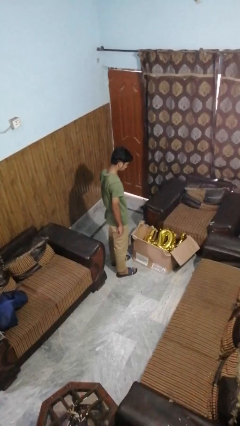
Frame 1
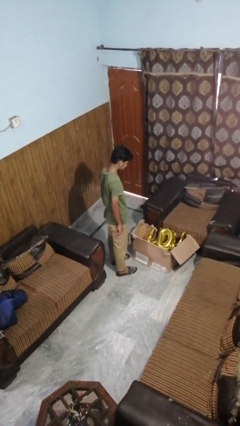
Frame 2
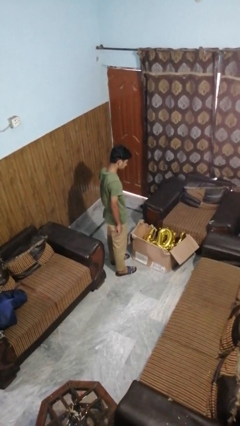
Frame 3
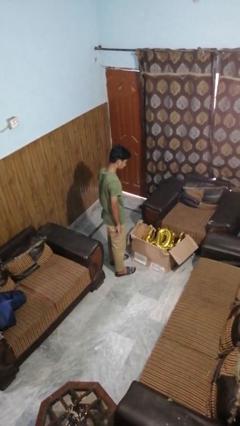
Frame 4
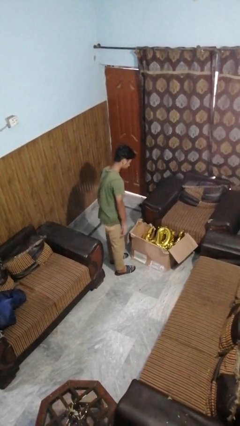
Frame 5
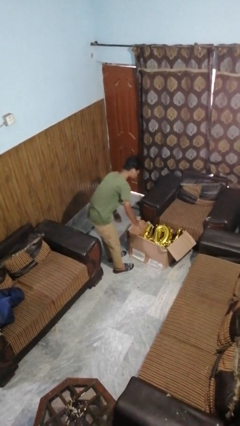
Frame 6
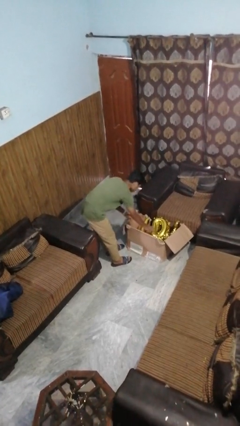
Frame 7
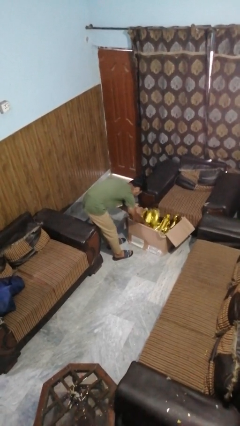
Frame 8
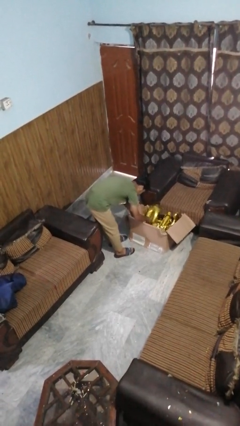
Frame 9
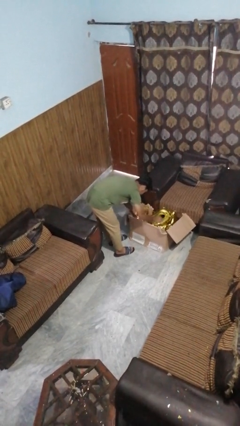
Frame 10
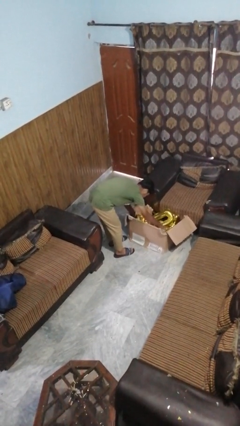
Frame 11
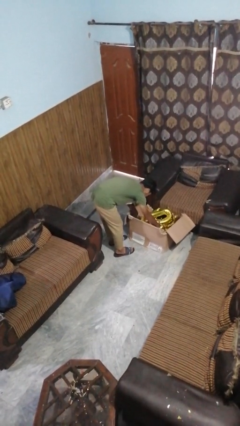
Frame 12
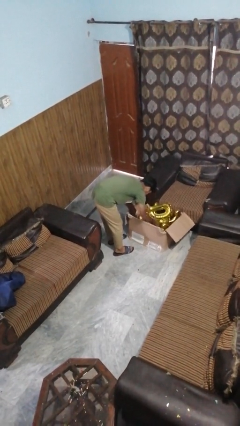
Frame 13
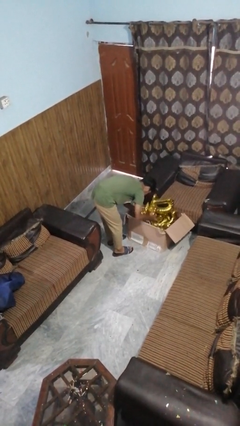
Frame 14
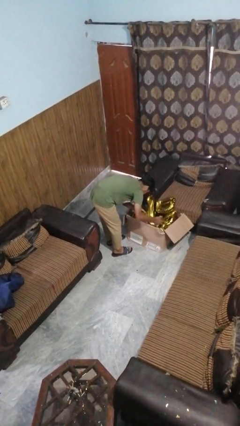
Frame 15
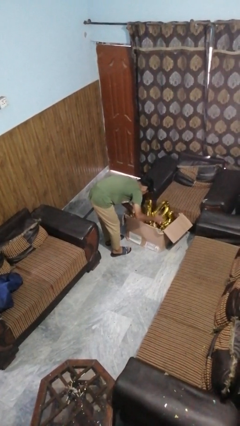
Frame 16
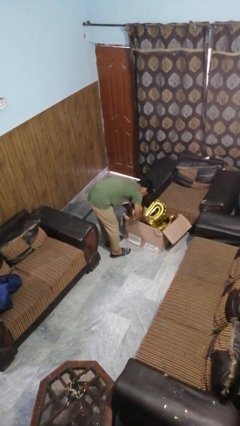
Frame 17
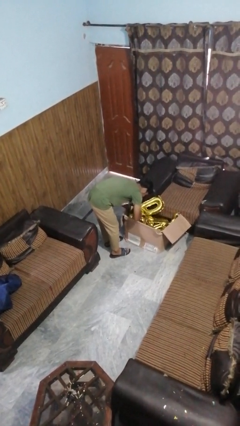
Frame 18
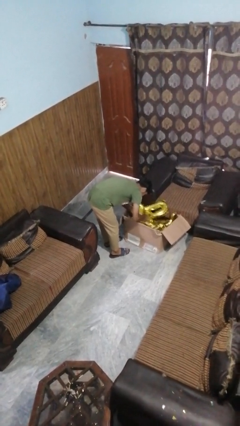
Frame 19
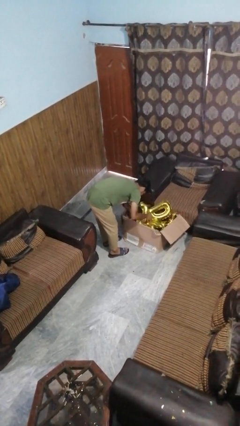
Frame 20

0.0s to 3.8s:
person searches in box

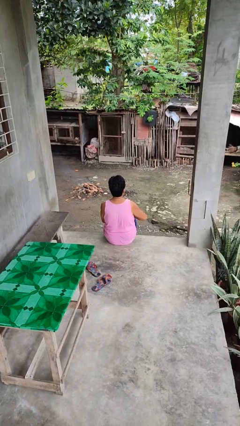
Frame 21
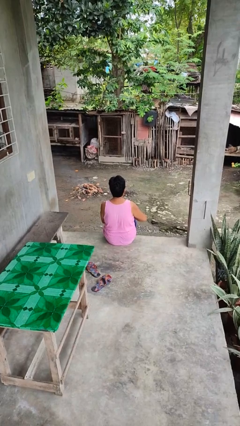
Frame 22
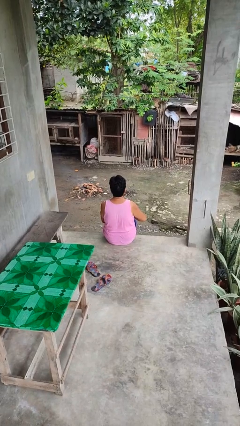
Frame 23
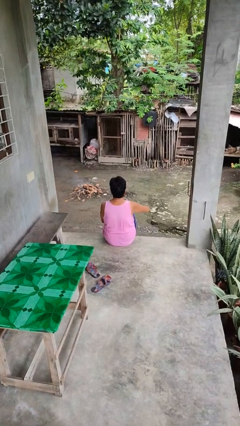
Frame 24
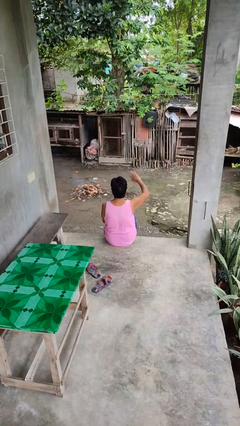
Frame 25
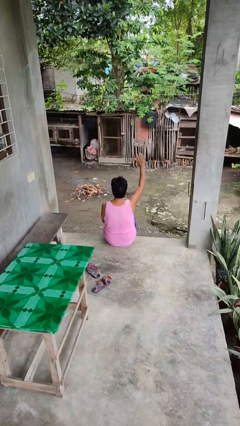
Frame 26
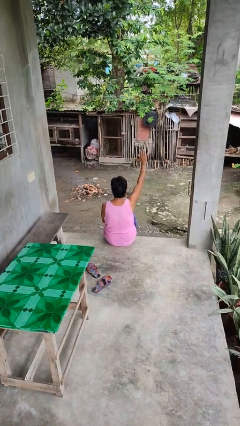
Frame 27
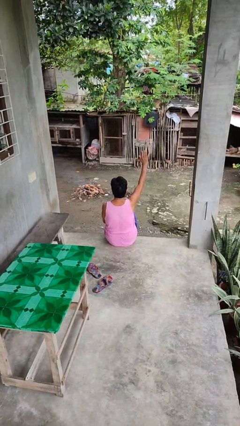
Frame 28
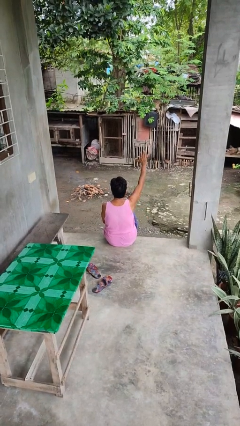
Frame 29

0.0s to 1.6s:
person gestures swipe up

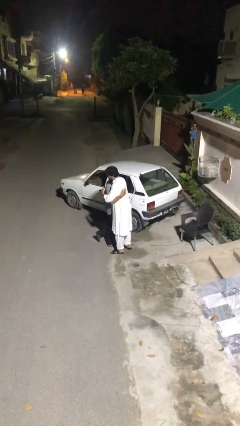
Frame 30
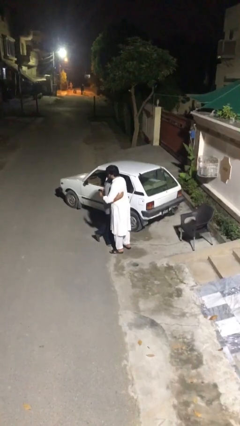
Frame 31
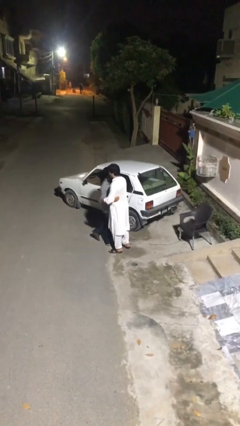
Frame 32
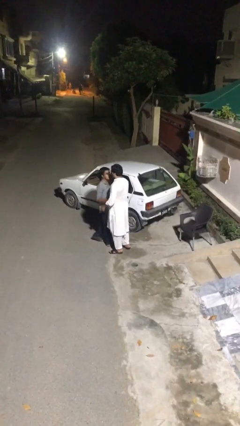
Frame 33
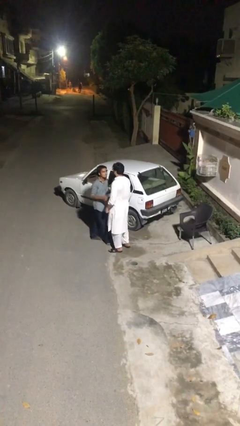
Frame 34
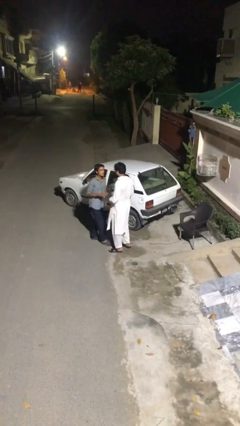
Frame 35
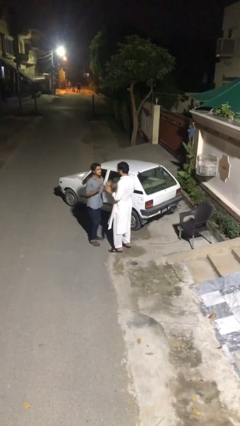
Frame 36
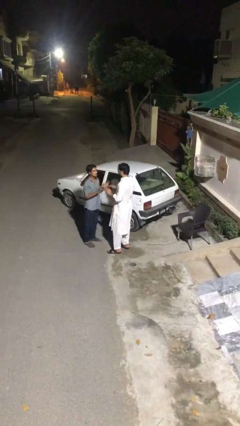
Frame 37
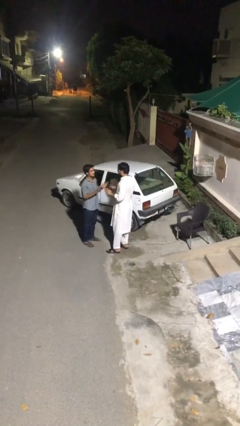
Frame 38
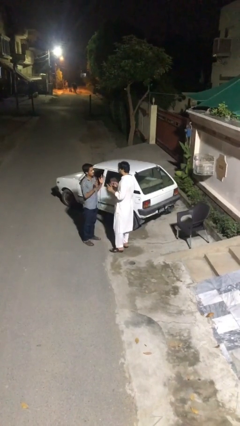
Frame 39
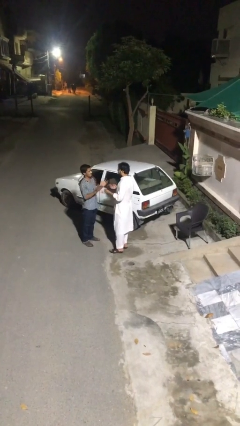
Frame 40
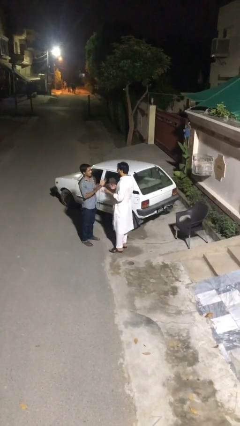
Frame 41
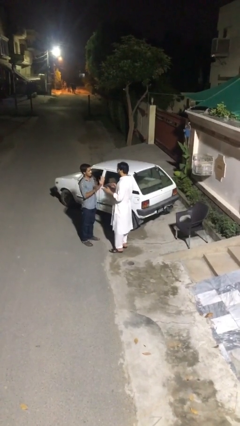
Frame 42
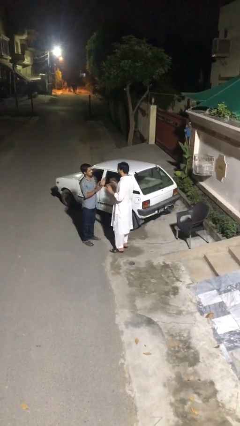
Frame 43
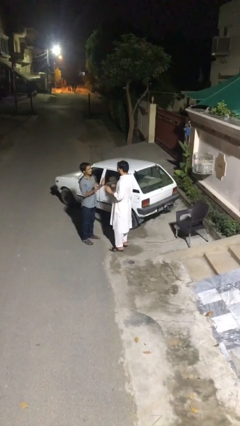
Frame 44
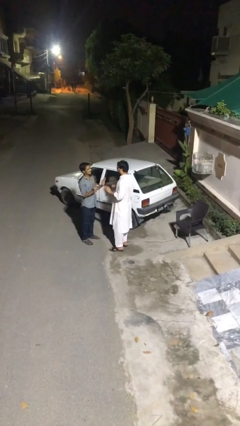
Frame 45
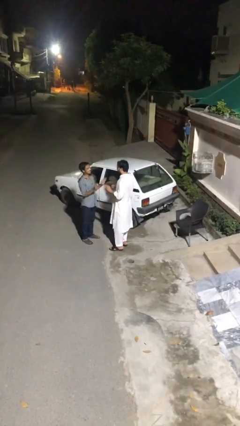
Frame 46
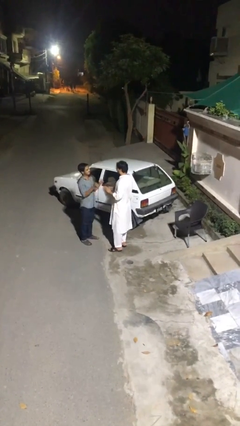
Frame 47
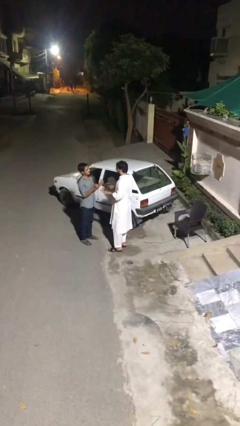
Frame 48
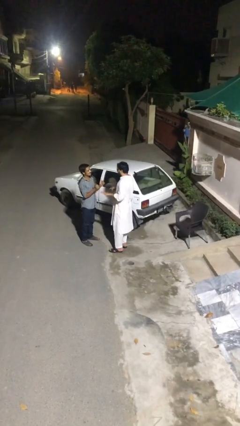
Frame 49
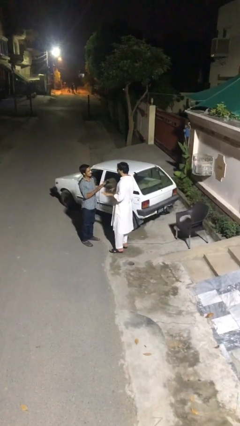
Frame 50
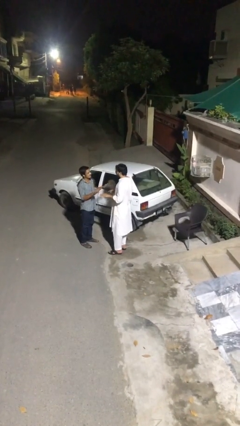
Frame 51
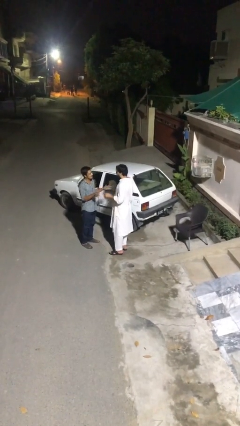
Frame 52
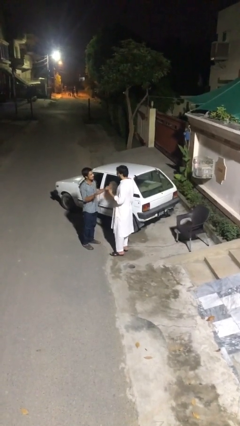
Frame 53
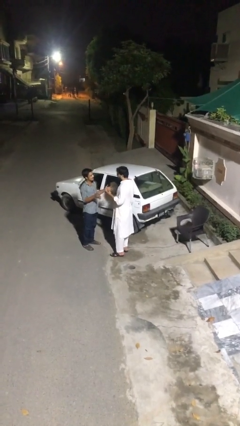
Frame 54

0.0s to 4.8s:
person talks to person

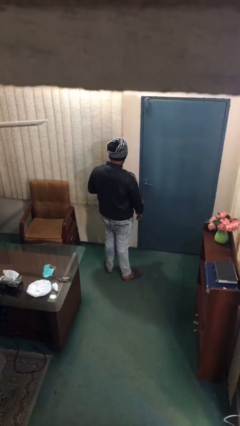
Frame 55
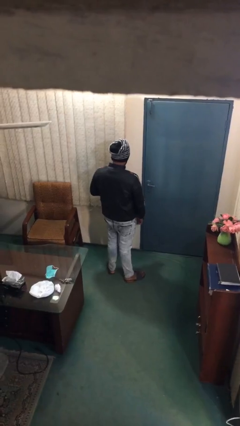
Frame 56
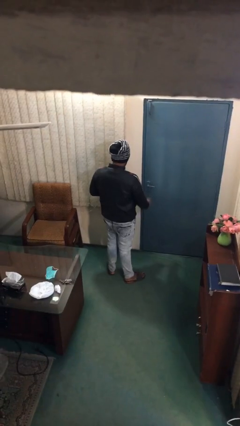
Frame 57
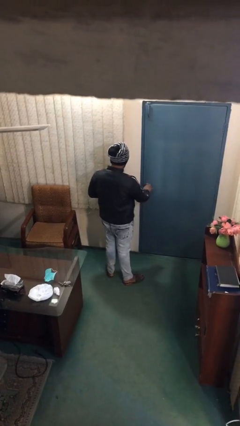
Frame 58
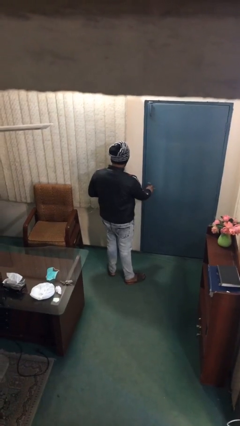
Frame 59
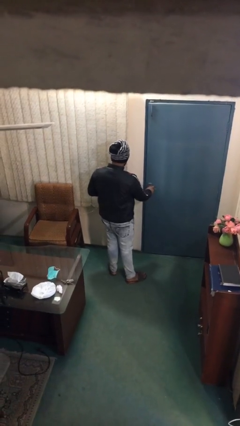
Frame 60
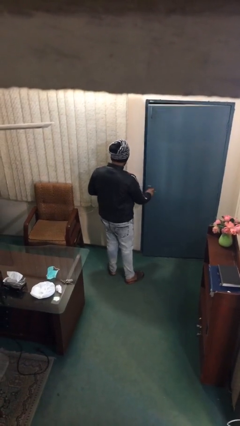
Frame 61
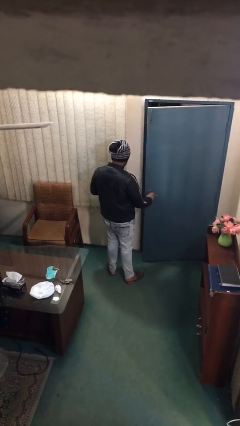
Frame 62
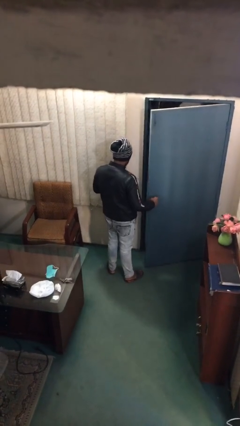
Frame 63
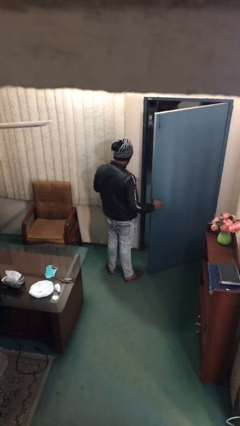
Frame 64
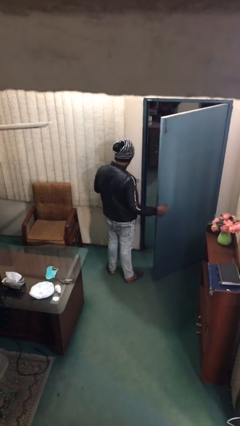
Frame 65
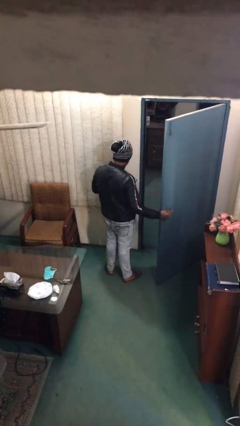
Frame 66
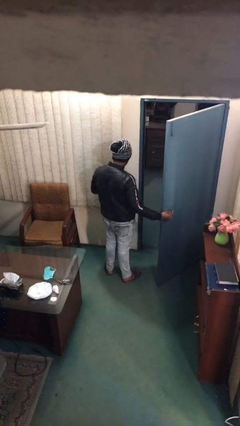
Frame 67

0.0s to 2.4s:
person opens facility door

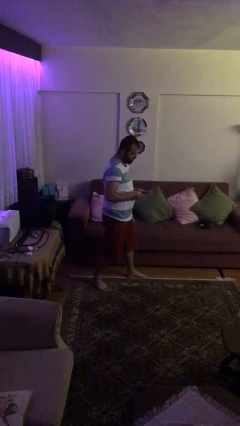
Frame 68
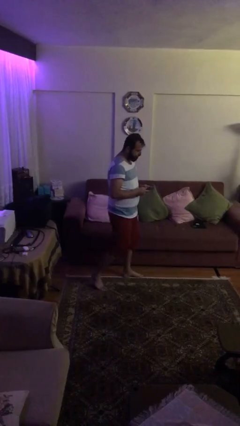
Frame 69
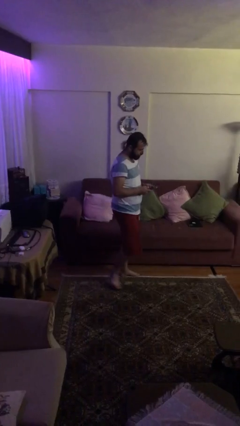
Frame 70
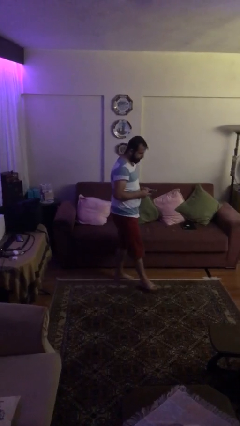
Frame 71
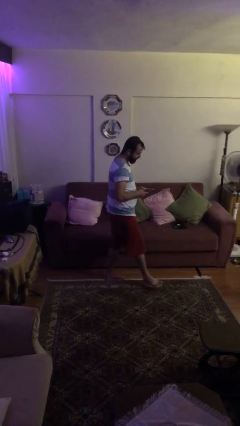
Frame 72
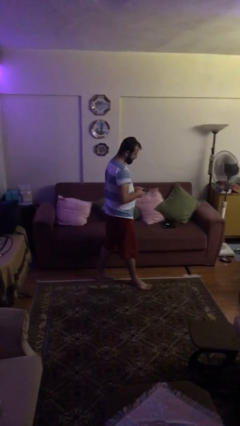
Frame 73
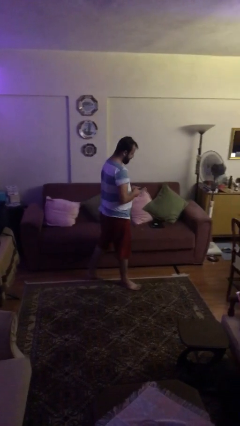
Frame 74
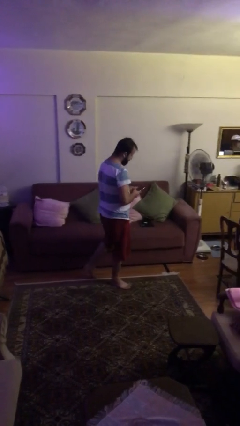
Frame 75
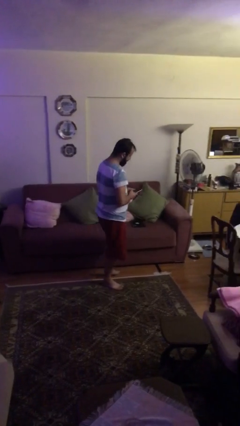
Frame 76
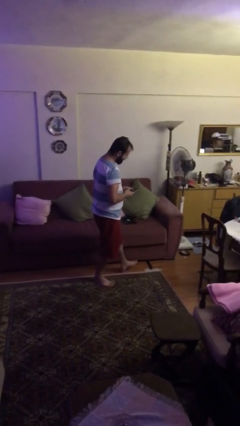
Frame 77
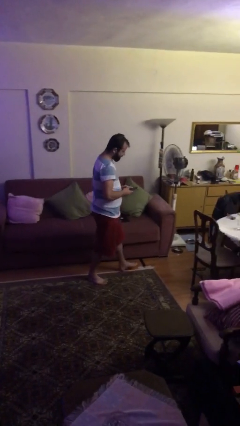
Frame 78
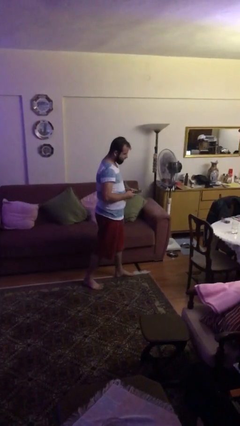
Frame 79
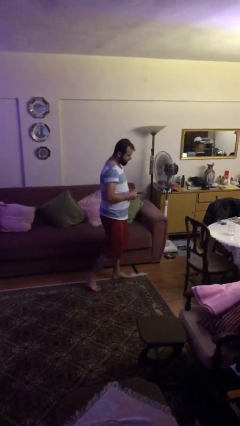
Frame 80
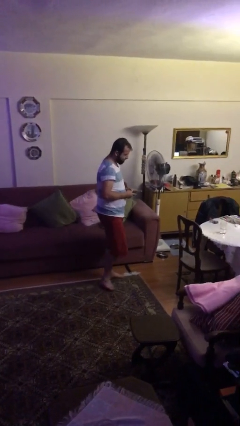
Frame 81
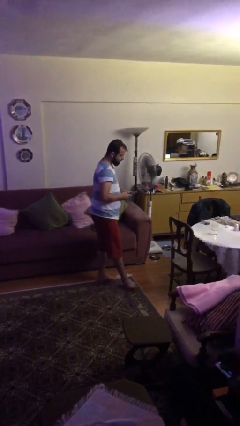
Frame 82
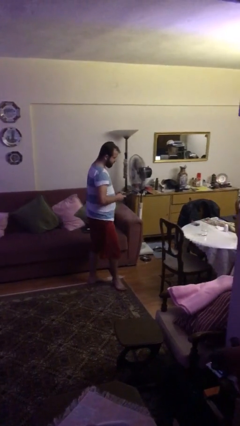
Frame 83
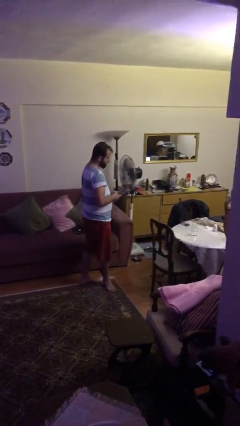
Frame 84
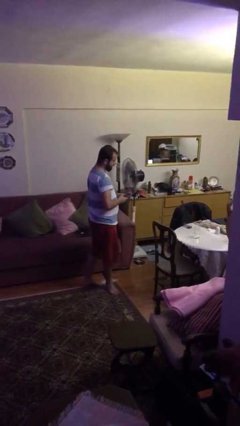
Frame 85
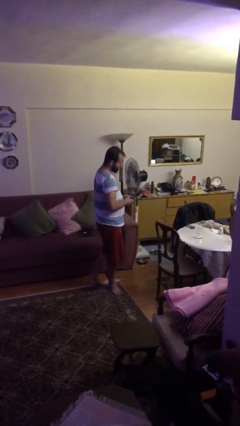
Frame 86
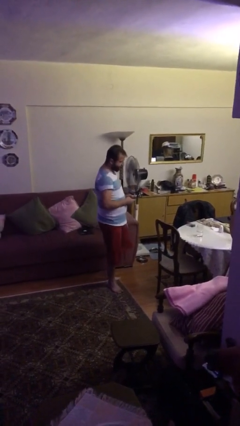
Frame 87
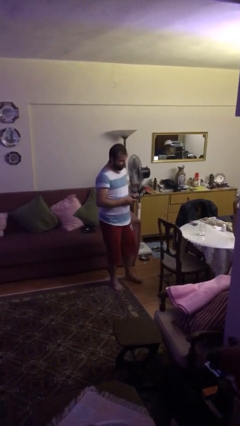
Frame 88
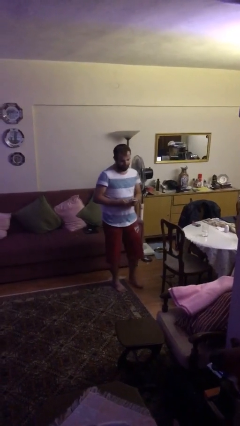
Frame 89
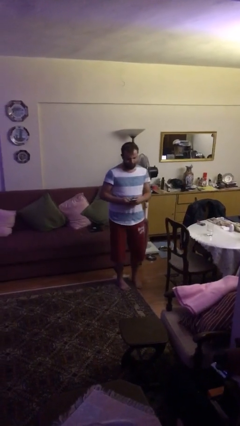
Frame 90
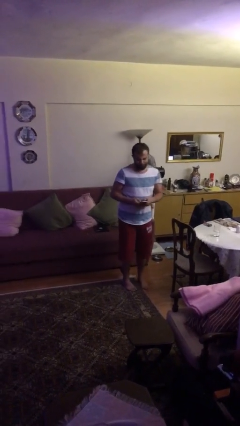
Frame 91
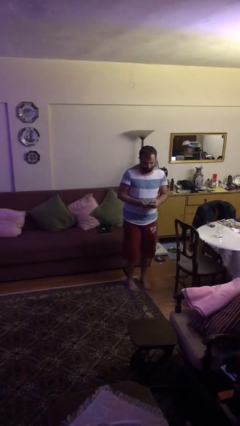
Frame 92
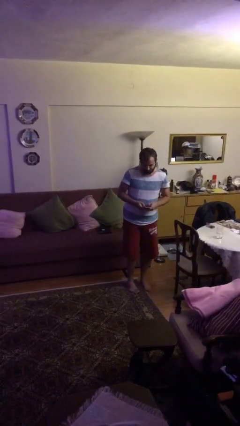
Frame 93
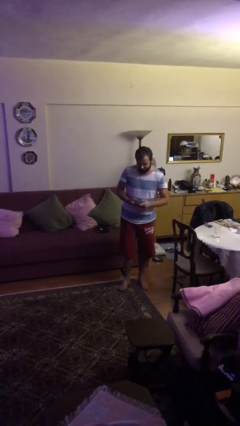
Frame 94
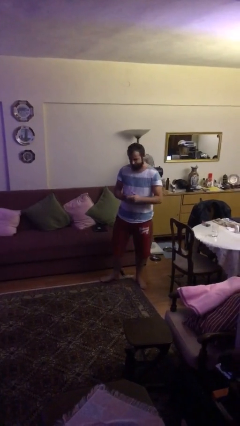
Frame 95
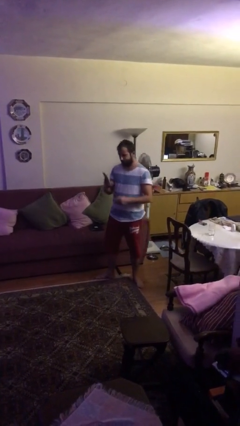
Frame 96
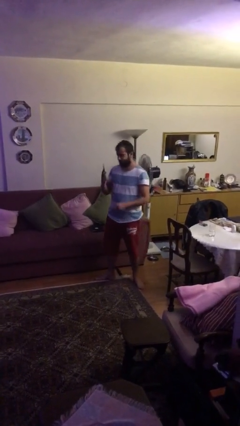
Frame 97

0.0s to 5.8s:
person texts on phone
